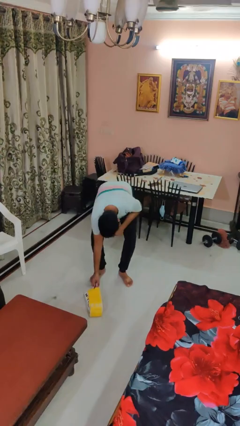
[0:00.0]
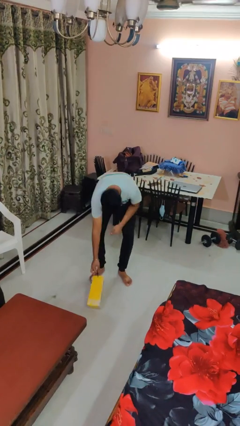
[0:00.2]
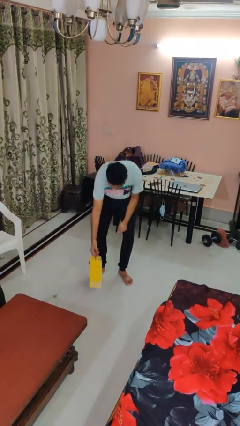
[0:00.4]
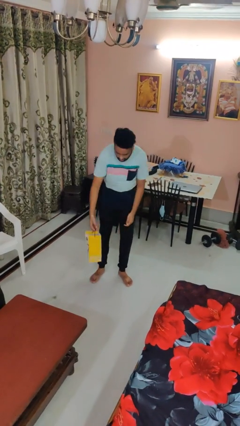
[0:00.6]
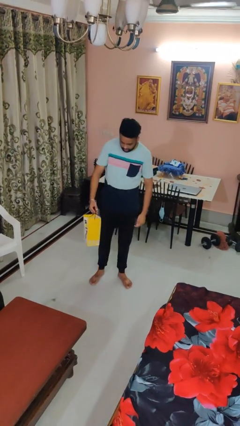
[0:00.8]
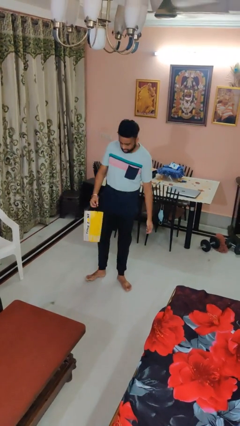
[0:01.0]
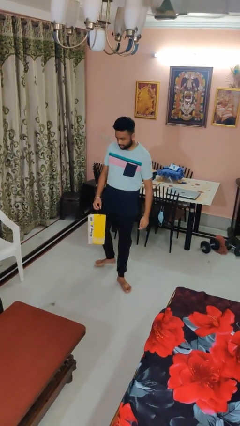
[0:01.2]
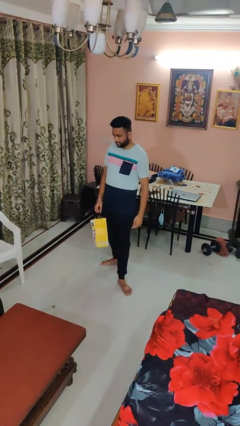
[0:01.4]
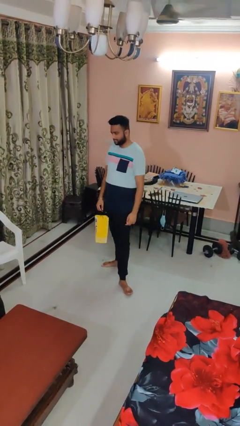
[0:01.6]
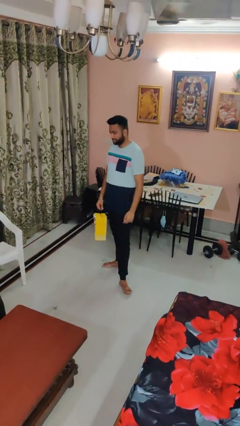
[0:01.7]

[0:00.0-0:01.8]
person picks up object from floor

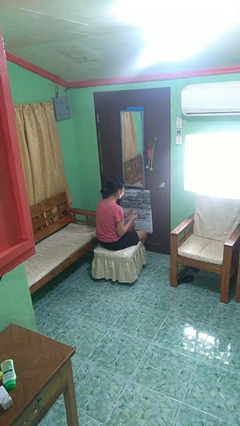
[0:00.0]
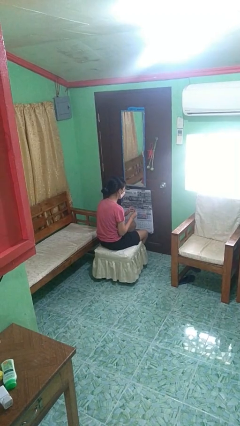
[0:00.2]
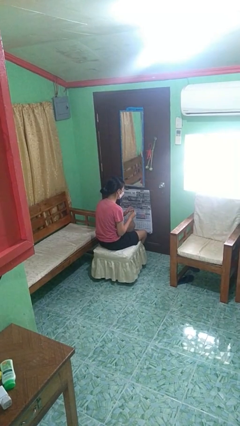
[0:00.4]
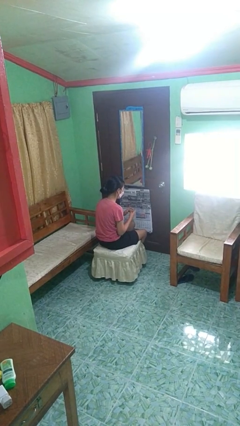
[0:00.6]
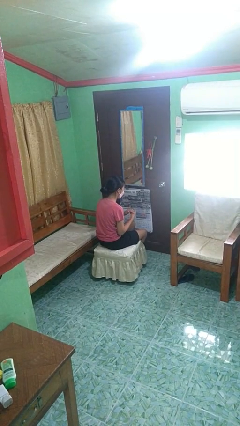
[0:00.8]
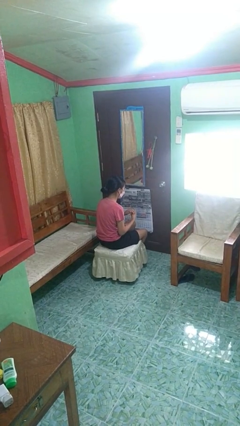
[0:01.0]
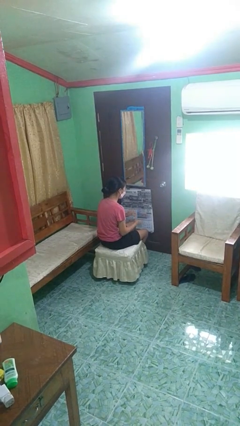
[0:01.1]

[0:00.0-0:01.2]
person puts on ring

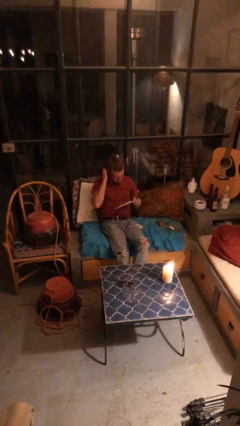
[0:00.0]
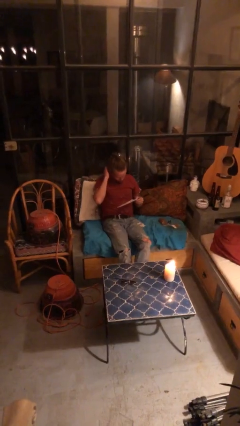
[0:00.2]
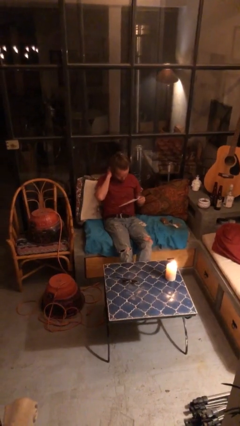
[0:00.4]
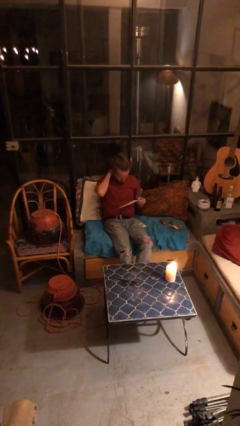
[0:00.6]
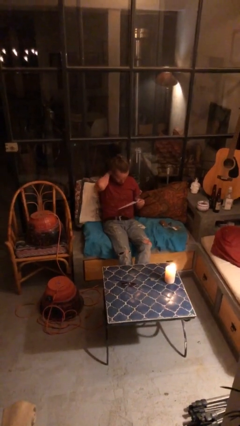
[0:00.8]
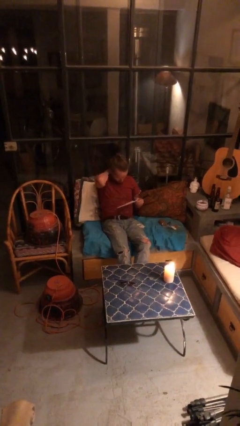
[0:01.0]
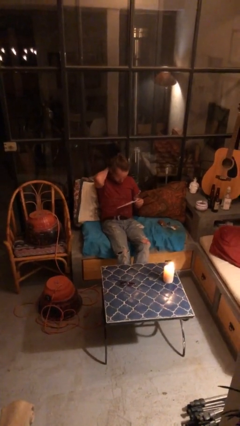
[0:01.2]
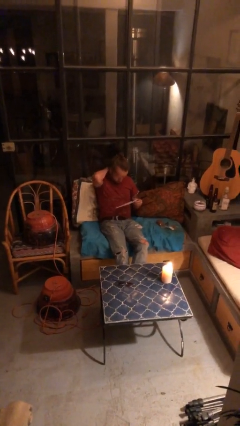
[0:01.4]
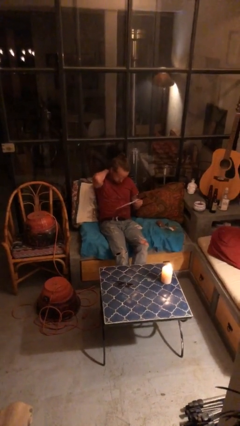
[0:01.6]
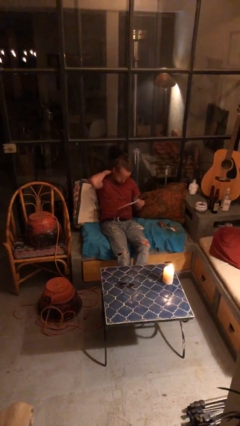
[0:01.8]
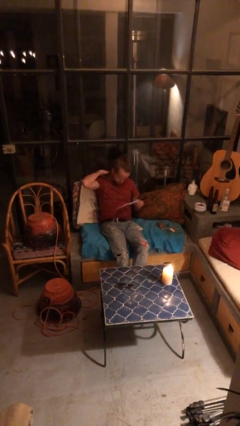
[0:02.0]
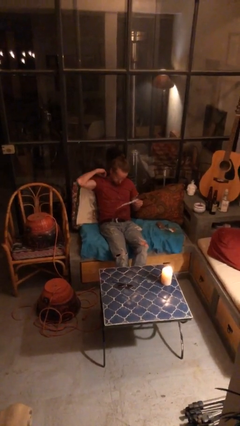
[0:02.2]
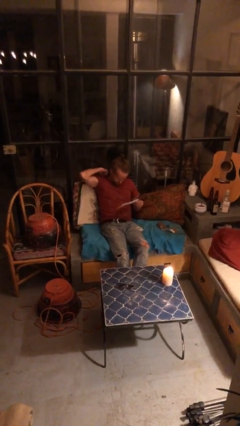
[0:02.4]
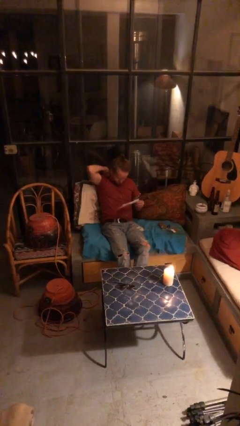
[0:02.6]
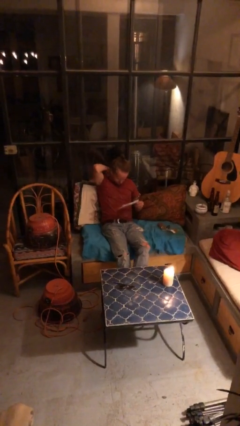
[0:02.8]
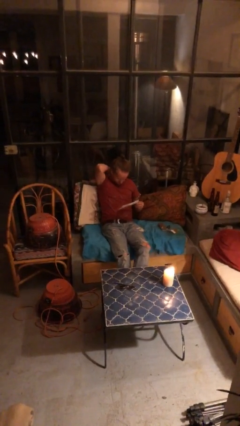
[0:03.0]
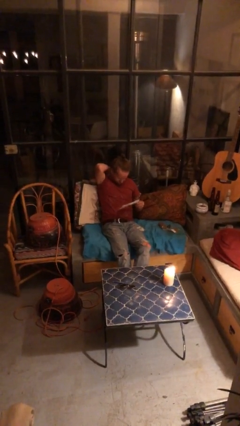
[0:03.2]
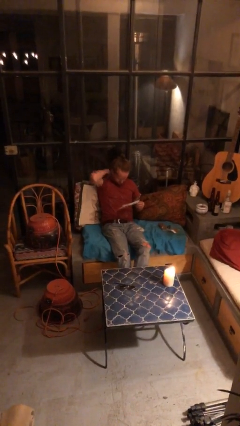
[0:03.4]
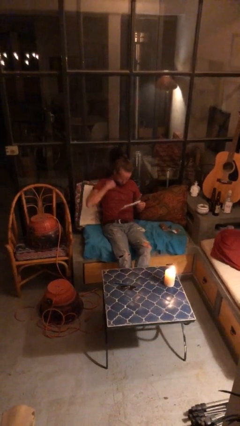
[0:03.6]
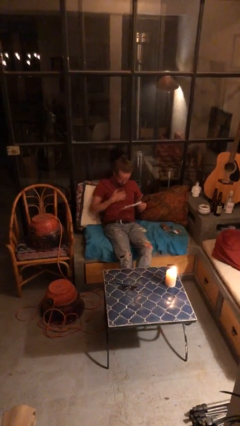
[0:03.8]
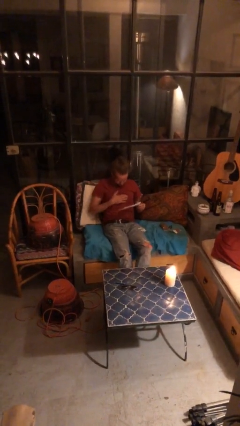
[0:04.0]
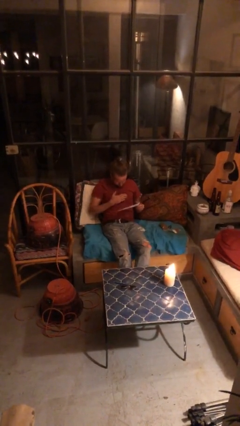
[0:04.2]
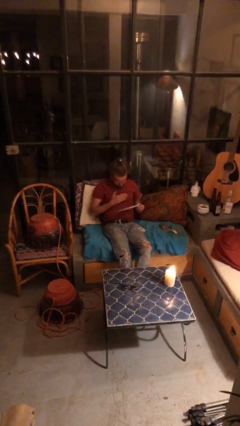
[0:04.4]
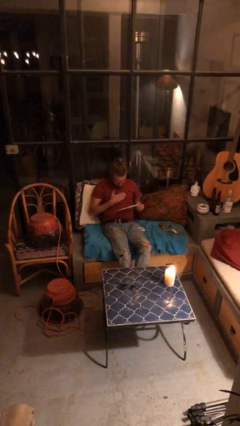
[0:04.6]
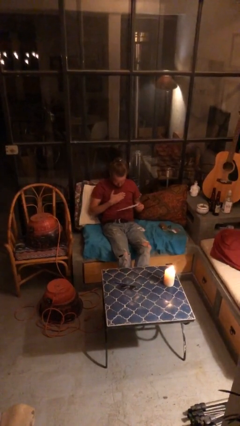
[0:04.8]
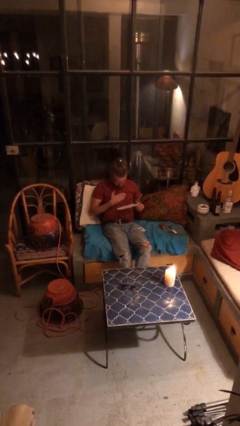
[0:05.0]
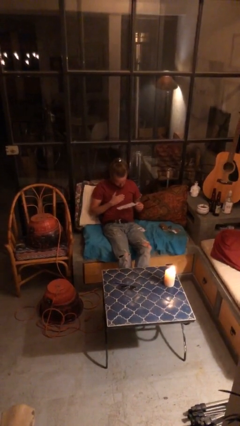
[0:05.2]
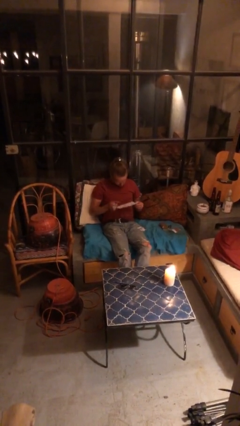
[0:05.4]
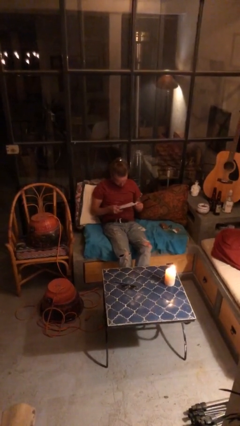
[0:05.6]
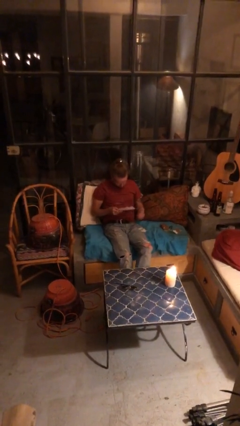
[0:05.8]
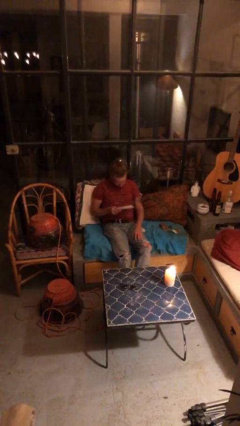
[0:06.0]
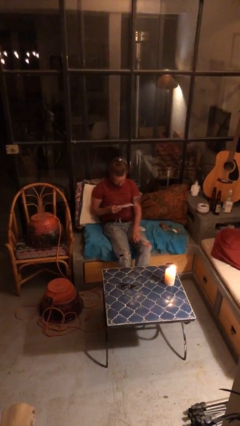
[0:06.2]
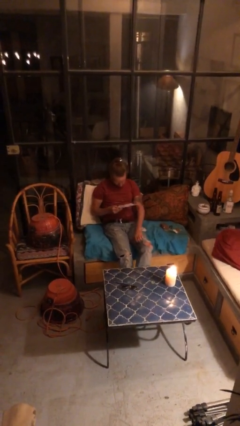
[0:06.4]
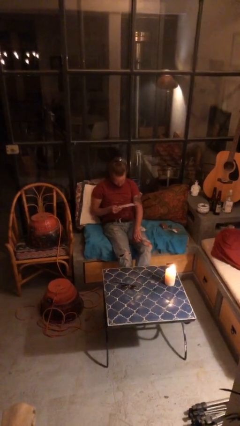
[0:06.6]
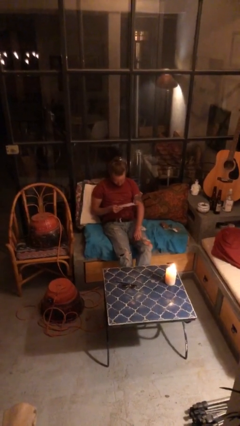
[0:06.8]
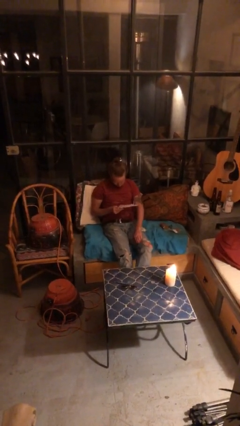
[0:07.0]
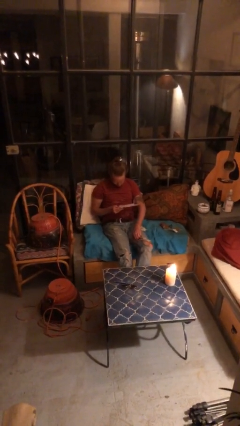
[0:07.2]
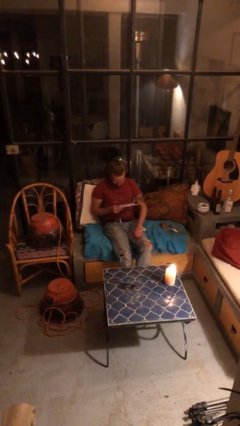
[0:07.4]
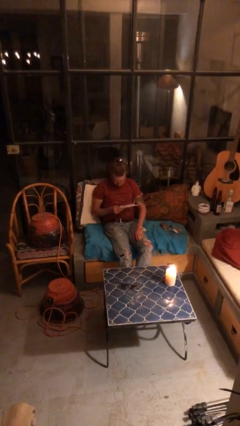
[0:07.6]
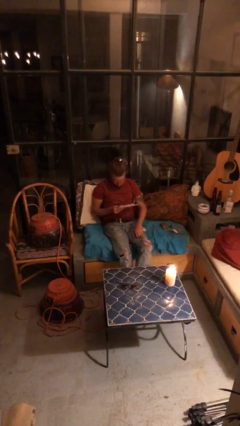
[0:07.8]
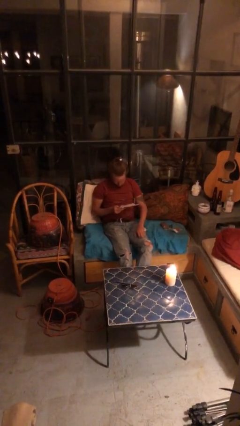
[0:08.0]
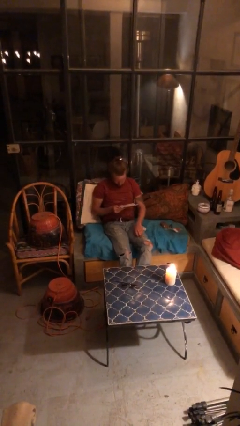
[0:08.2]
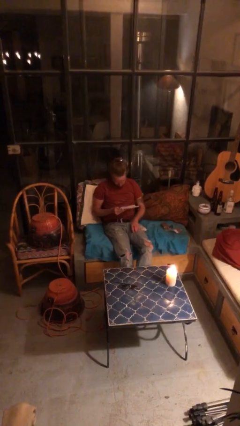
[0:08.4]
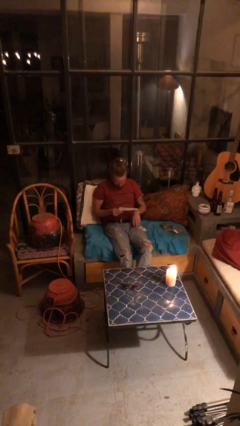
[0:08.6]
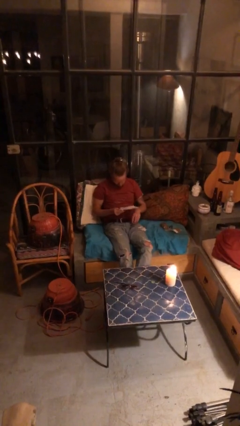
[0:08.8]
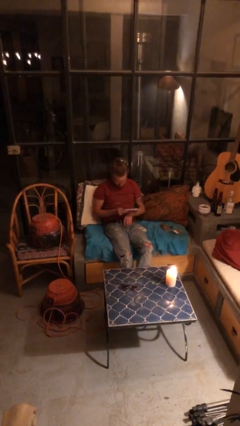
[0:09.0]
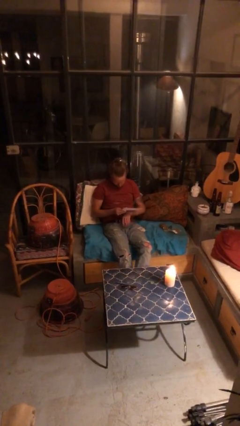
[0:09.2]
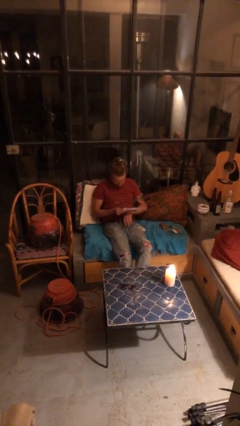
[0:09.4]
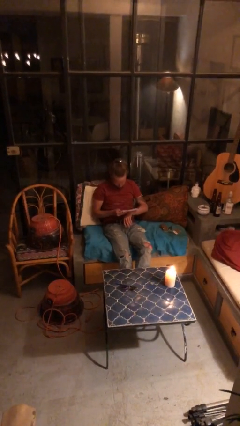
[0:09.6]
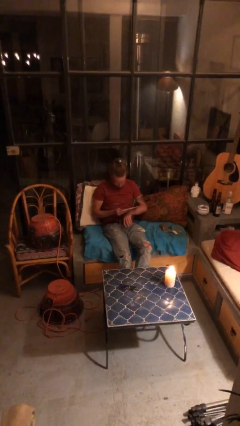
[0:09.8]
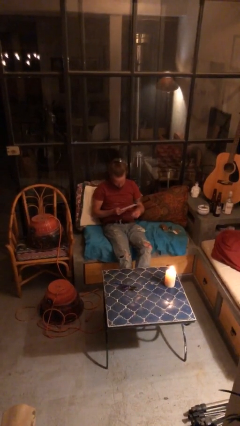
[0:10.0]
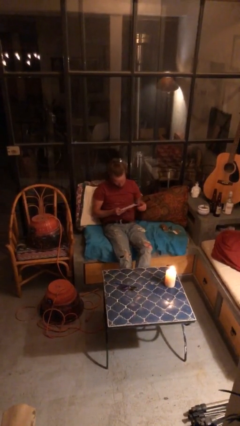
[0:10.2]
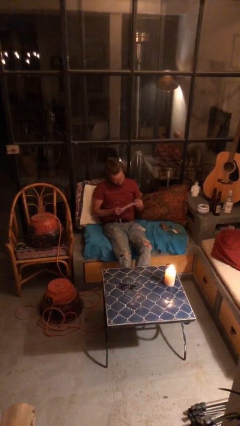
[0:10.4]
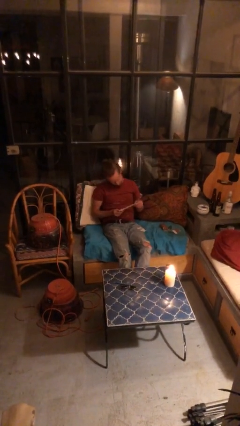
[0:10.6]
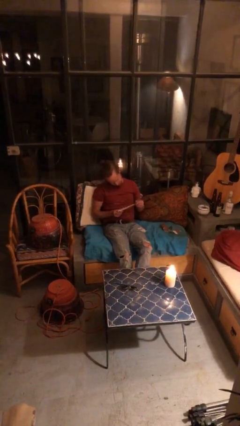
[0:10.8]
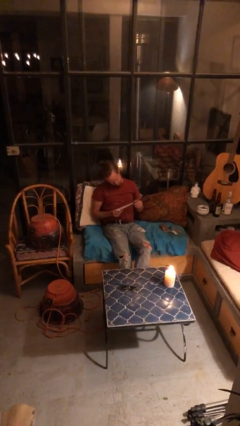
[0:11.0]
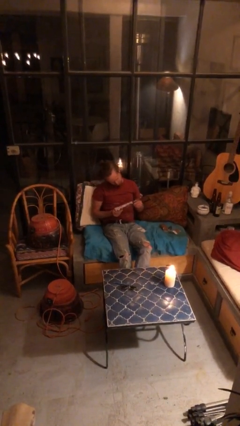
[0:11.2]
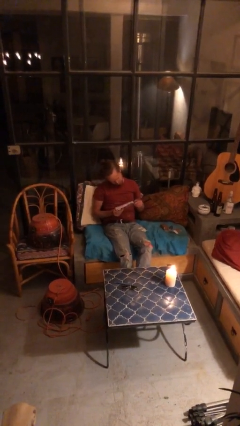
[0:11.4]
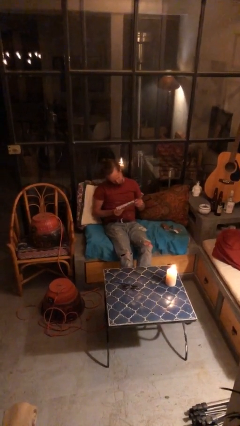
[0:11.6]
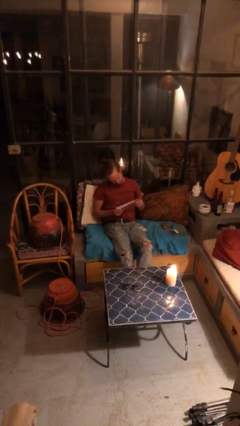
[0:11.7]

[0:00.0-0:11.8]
person reads document

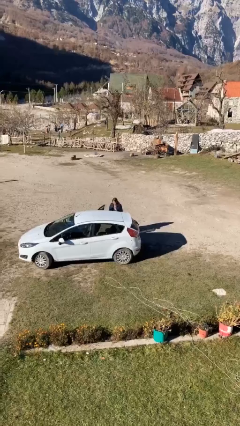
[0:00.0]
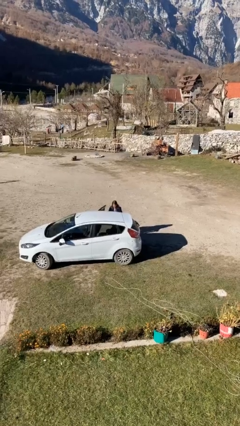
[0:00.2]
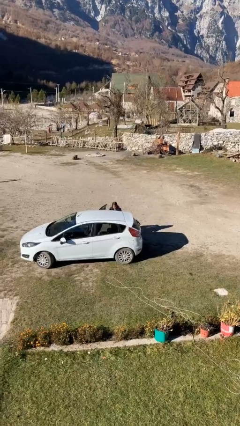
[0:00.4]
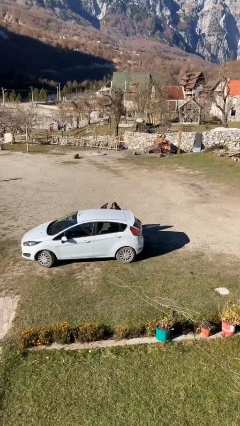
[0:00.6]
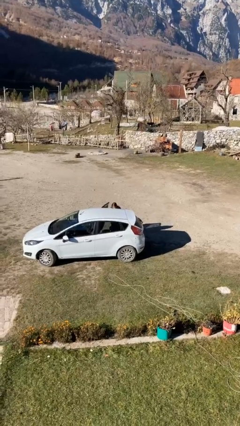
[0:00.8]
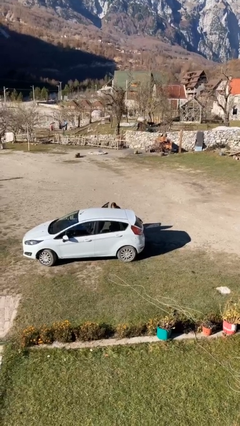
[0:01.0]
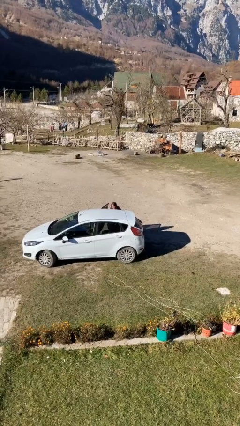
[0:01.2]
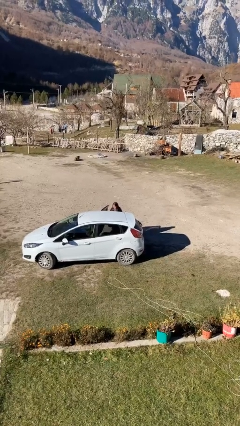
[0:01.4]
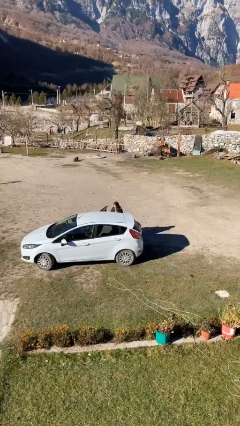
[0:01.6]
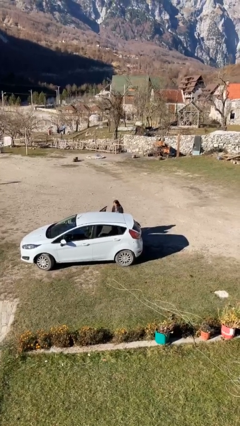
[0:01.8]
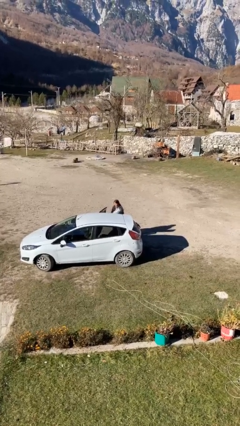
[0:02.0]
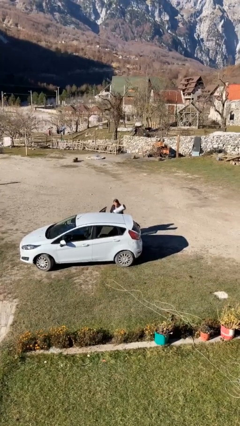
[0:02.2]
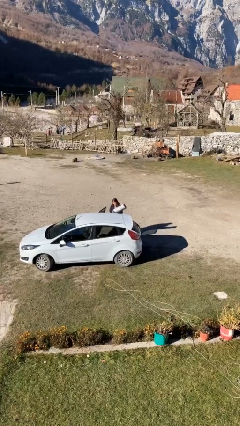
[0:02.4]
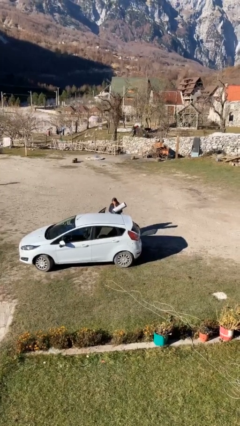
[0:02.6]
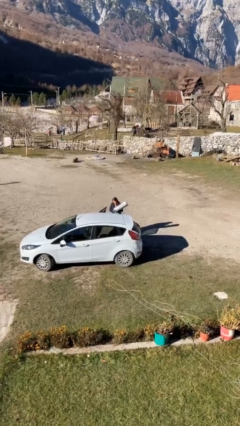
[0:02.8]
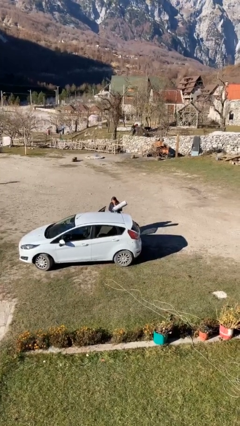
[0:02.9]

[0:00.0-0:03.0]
person unloads car
